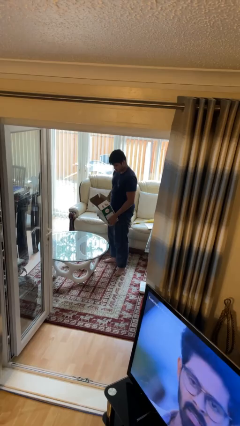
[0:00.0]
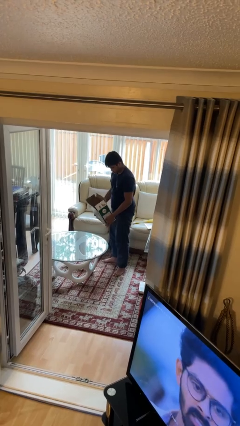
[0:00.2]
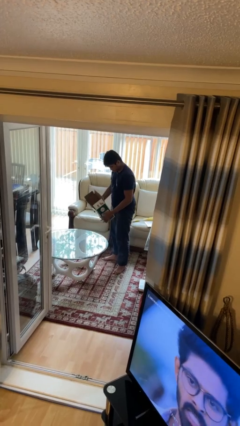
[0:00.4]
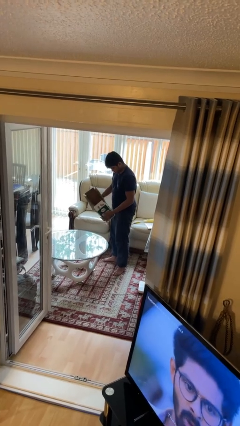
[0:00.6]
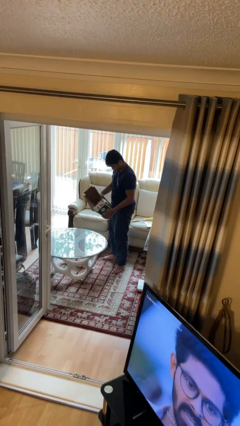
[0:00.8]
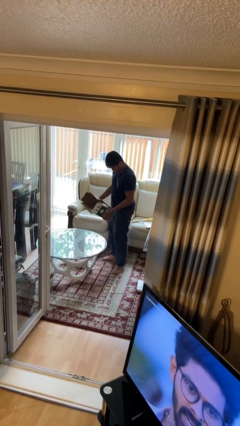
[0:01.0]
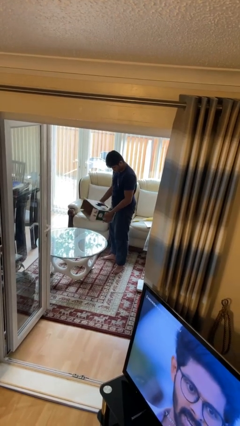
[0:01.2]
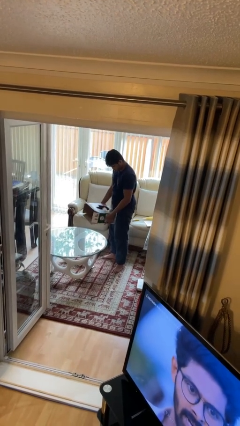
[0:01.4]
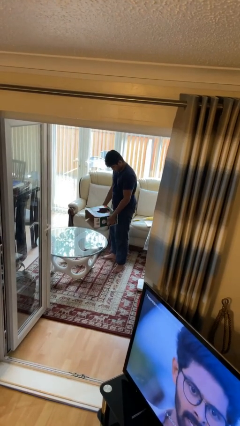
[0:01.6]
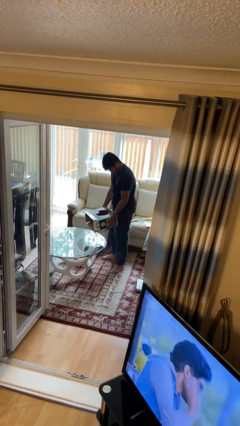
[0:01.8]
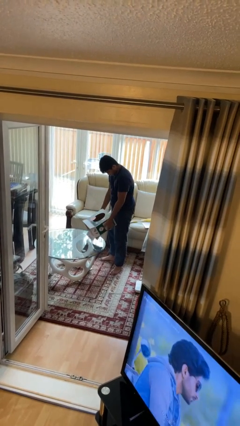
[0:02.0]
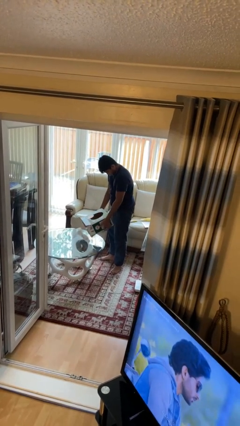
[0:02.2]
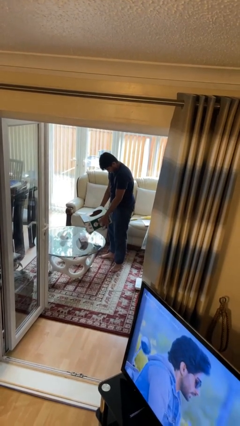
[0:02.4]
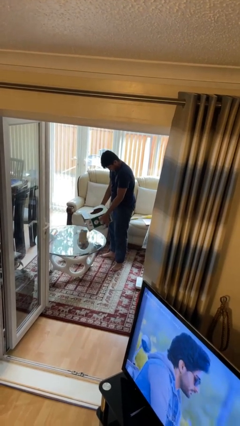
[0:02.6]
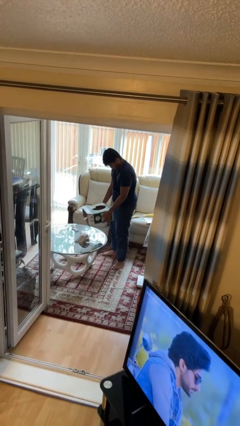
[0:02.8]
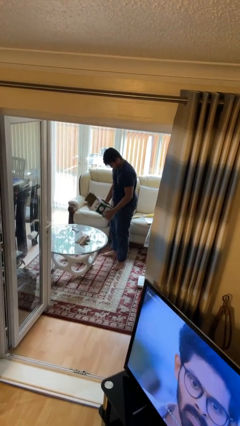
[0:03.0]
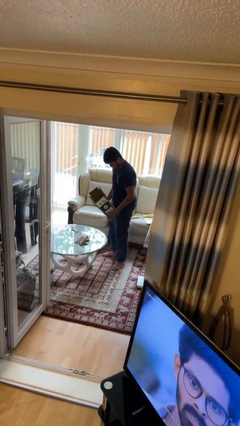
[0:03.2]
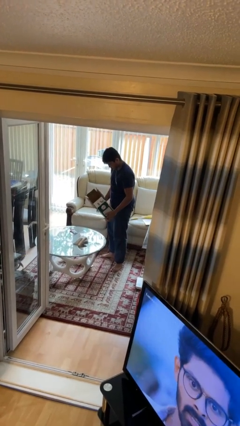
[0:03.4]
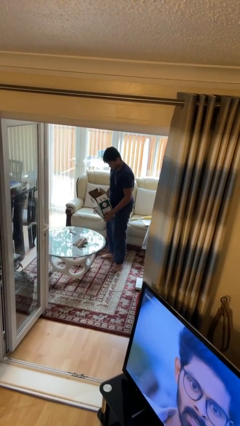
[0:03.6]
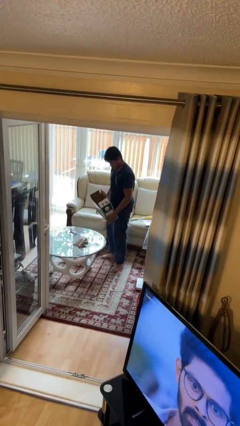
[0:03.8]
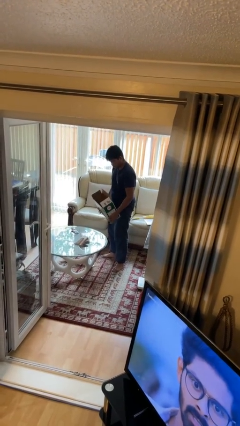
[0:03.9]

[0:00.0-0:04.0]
person unloads box onto table

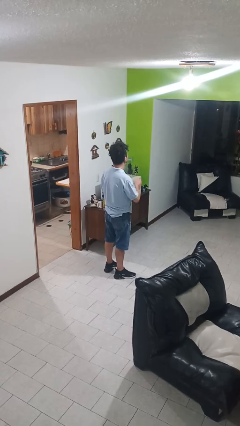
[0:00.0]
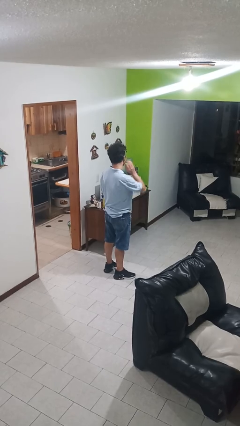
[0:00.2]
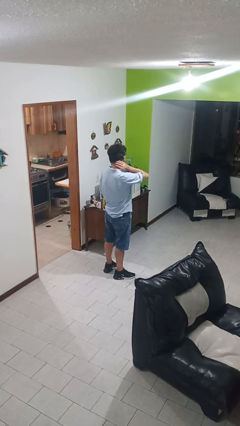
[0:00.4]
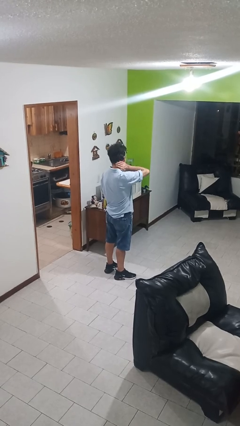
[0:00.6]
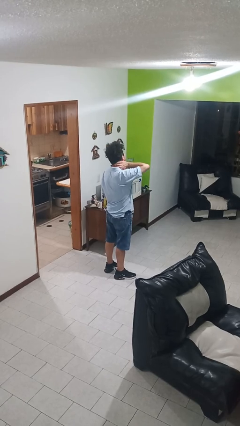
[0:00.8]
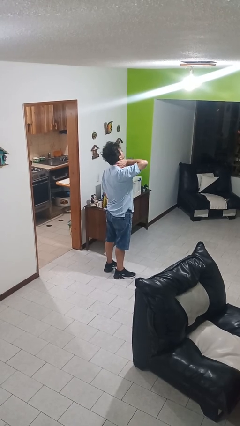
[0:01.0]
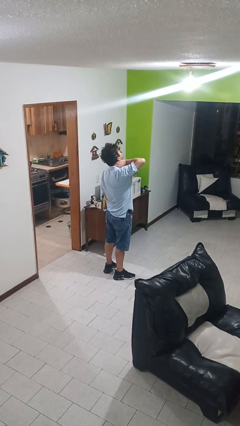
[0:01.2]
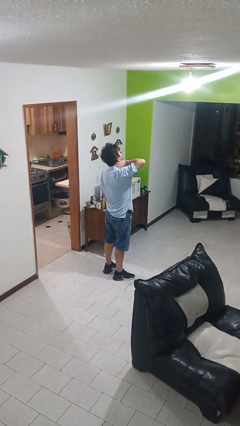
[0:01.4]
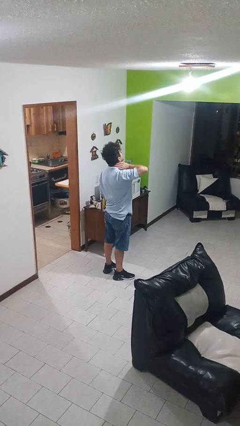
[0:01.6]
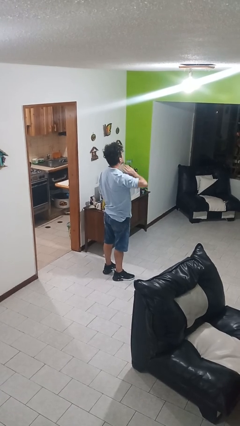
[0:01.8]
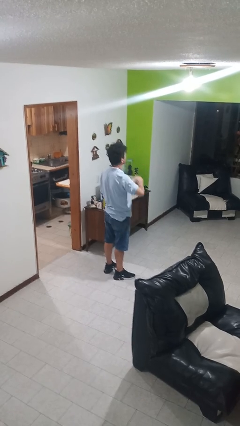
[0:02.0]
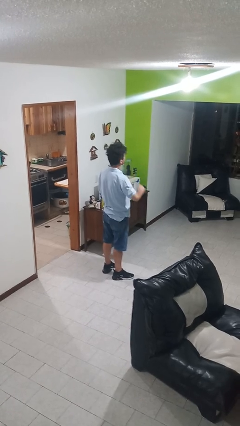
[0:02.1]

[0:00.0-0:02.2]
person rubs neck

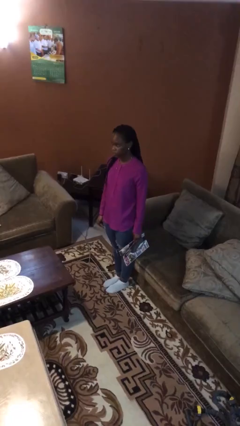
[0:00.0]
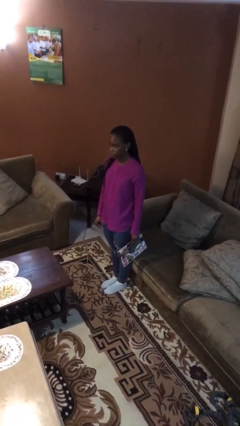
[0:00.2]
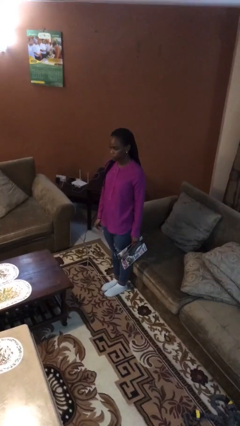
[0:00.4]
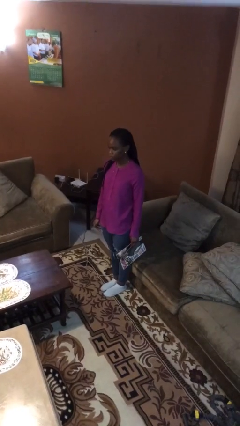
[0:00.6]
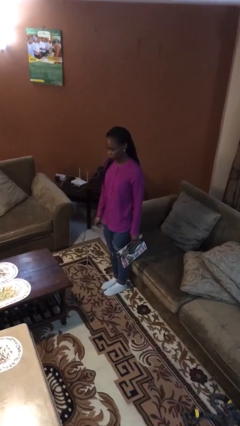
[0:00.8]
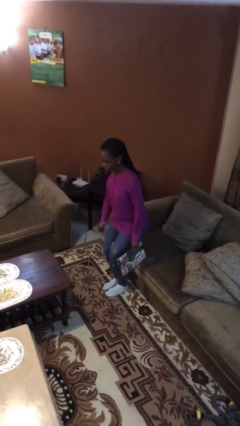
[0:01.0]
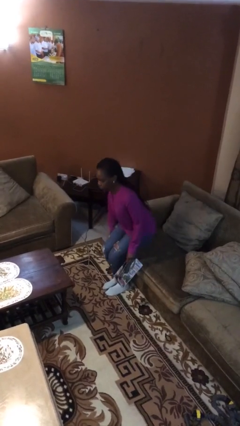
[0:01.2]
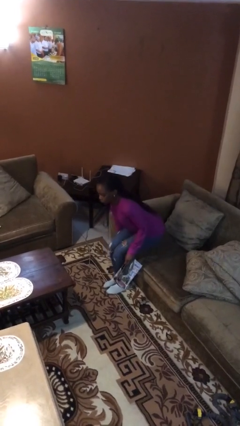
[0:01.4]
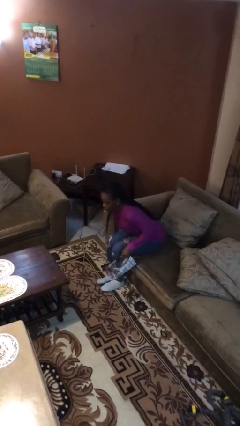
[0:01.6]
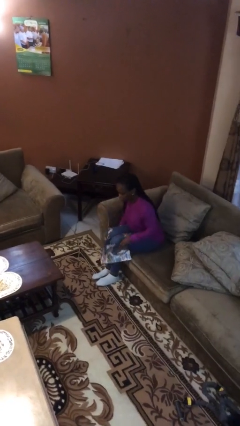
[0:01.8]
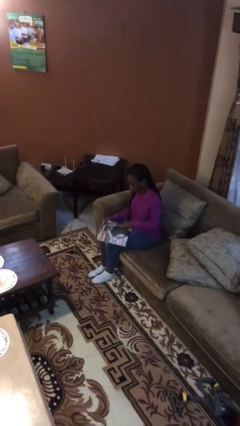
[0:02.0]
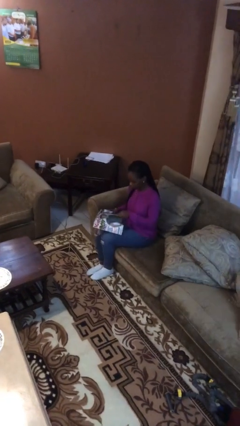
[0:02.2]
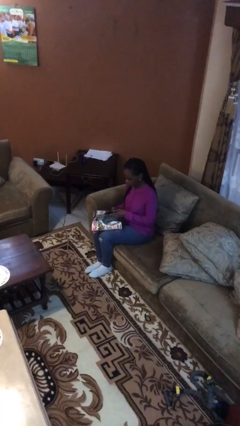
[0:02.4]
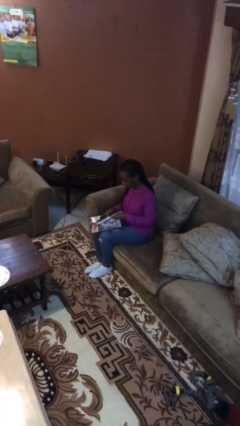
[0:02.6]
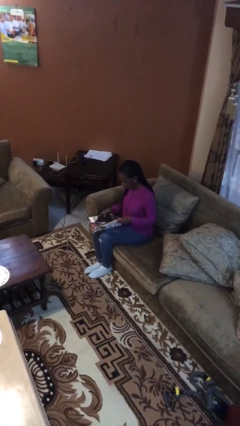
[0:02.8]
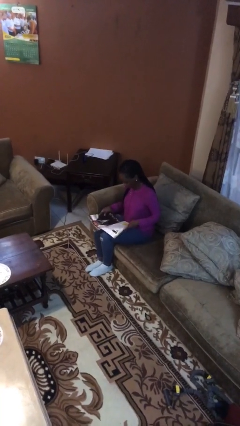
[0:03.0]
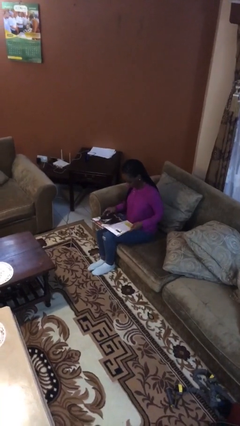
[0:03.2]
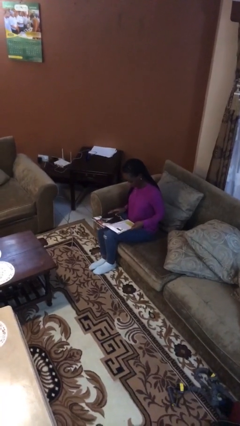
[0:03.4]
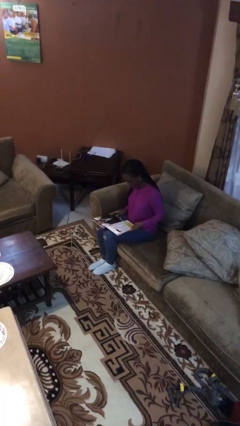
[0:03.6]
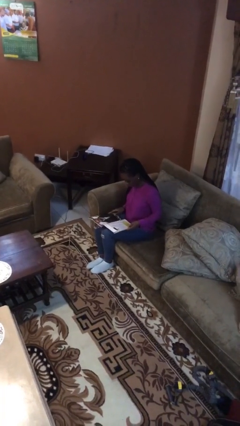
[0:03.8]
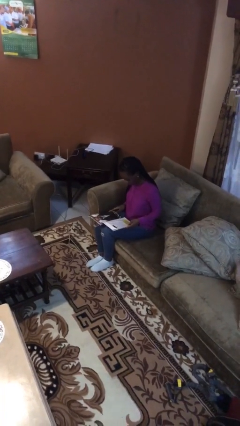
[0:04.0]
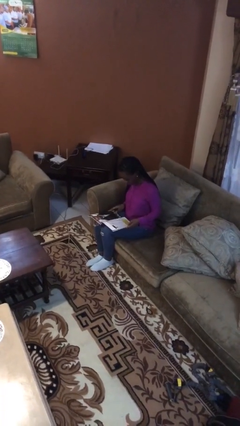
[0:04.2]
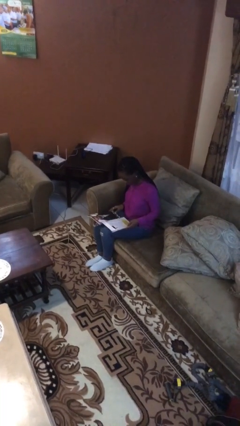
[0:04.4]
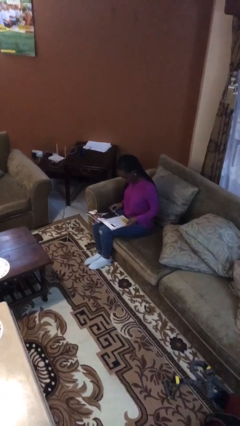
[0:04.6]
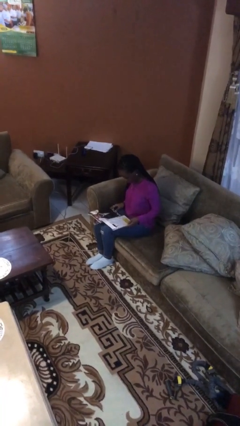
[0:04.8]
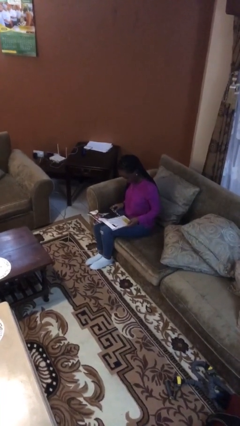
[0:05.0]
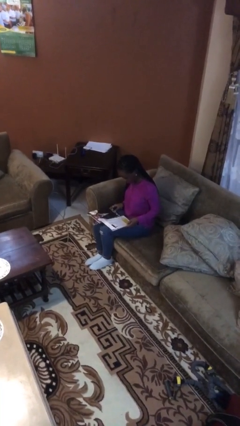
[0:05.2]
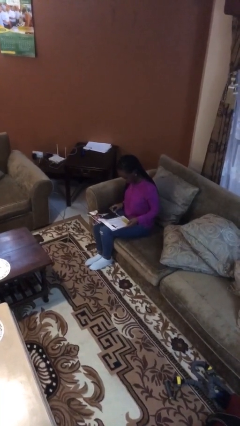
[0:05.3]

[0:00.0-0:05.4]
person sits down

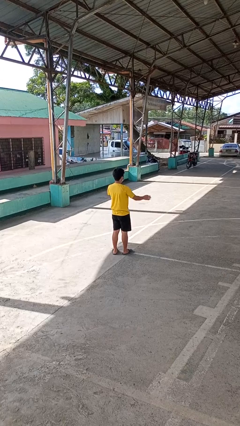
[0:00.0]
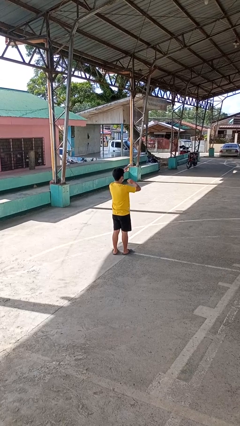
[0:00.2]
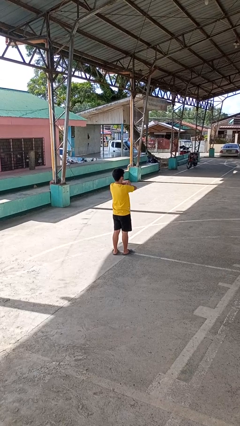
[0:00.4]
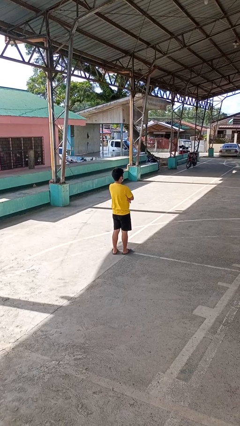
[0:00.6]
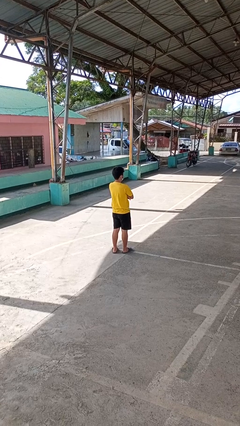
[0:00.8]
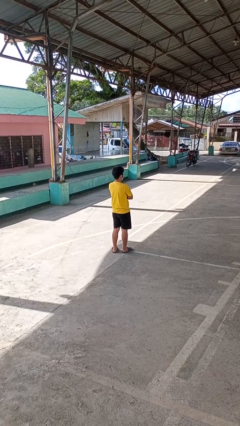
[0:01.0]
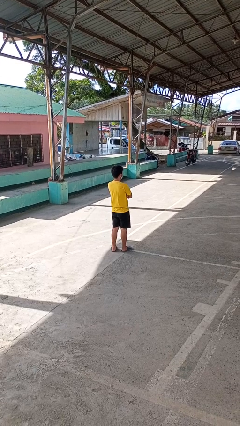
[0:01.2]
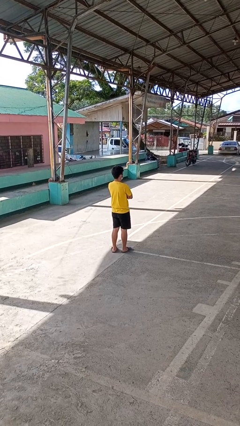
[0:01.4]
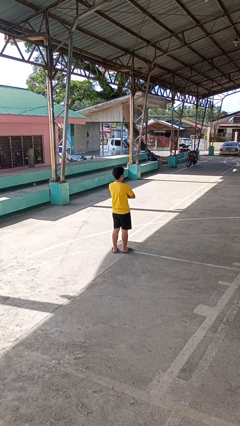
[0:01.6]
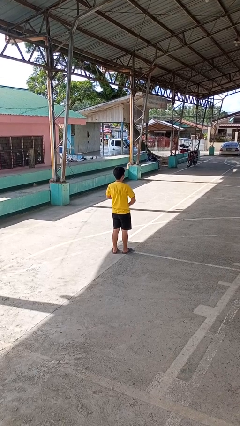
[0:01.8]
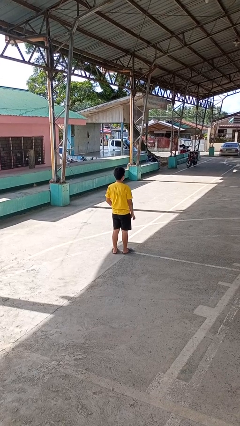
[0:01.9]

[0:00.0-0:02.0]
person crosses arms

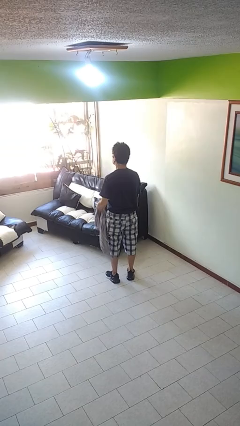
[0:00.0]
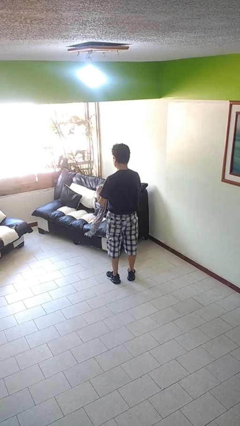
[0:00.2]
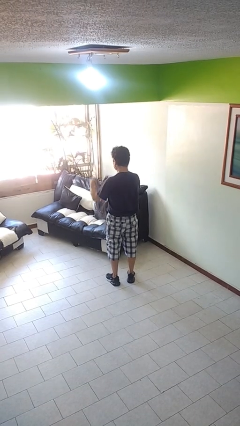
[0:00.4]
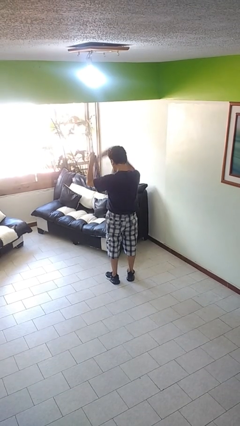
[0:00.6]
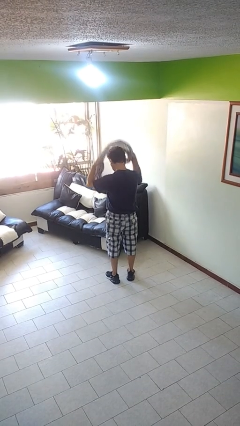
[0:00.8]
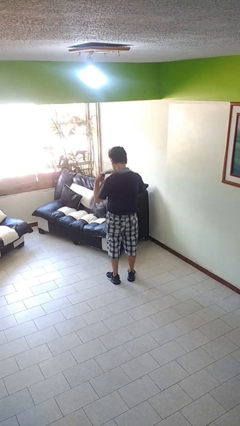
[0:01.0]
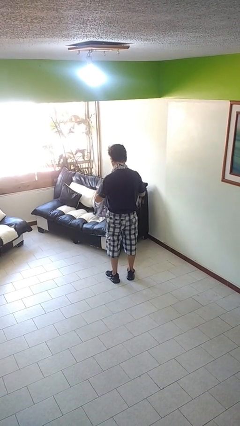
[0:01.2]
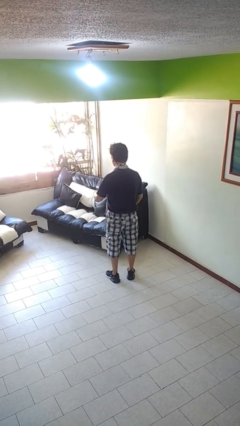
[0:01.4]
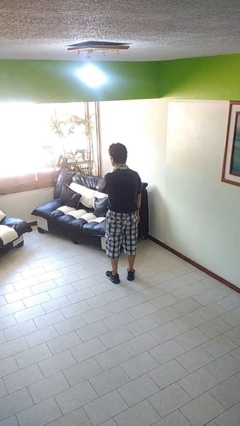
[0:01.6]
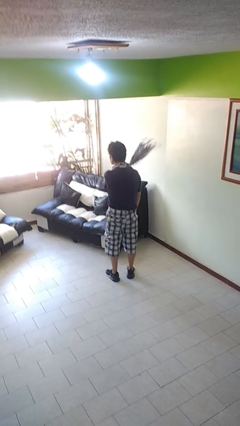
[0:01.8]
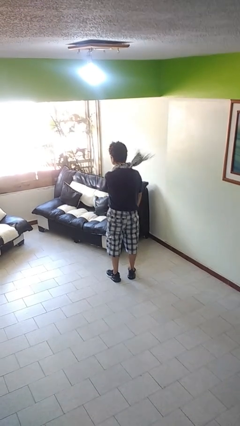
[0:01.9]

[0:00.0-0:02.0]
person puts on scarf

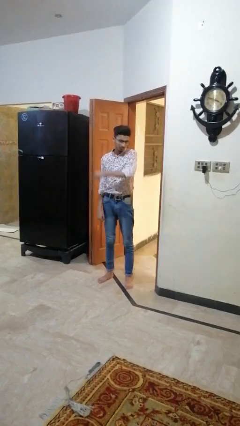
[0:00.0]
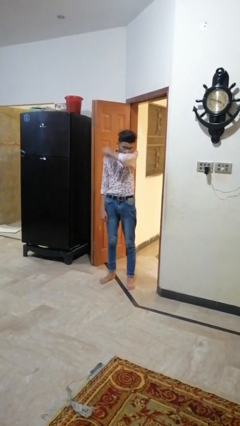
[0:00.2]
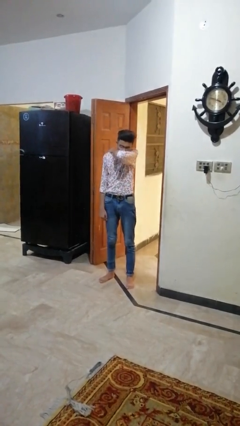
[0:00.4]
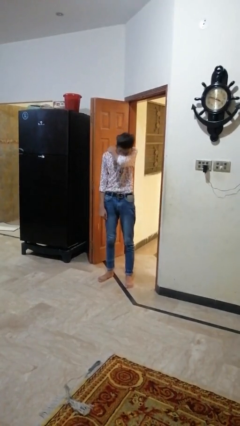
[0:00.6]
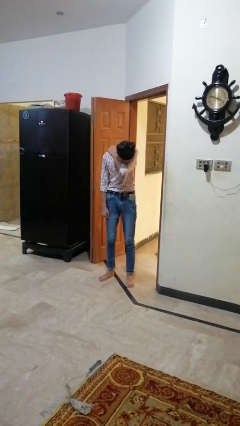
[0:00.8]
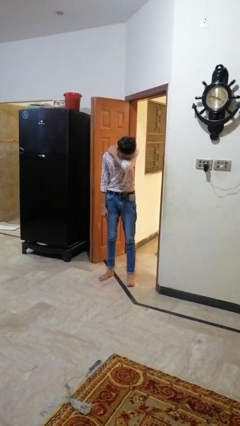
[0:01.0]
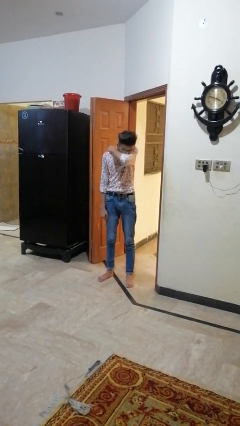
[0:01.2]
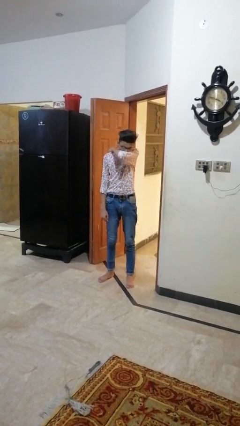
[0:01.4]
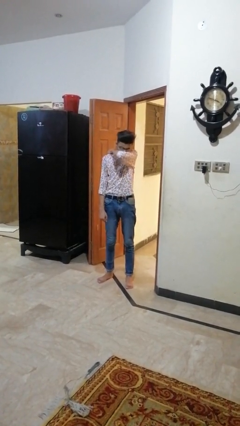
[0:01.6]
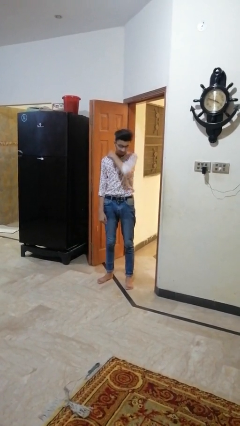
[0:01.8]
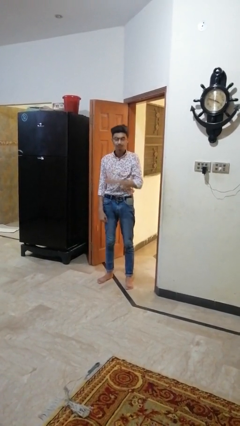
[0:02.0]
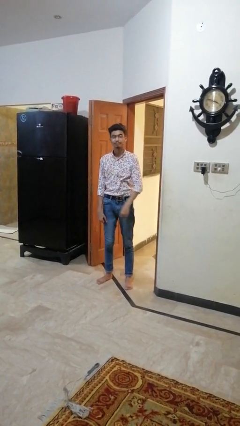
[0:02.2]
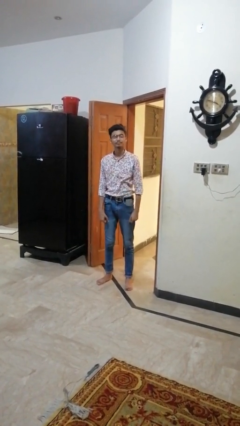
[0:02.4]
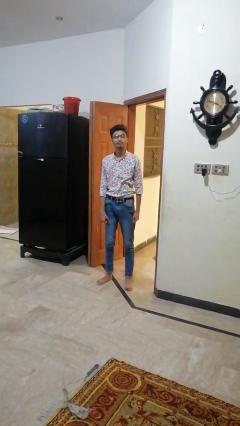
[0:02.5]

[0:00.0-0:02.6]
person sneezes into arm
